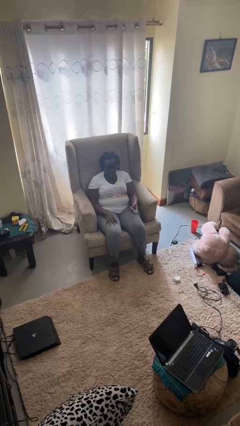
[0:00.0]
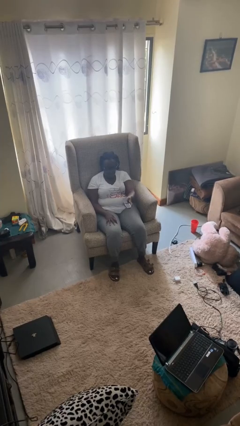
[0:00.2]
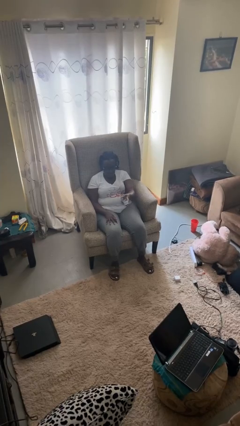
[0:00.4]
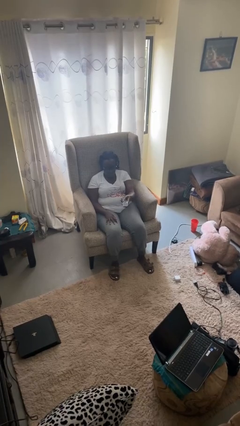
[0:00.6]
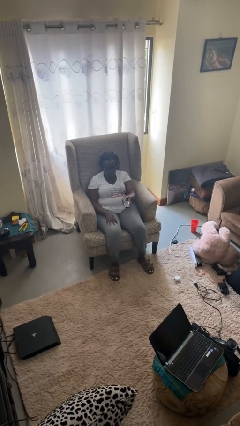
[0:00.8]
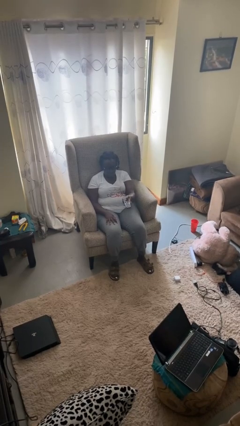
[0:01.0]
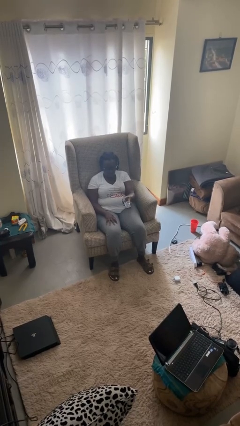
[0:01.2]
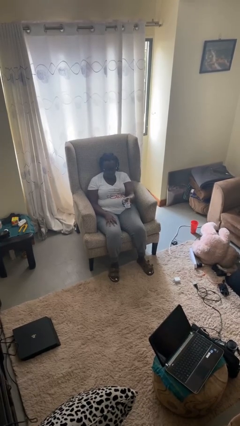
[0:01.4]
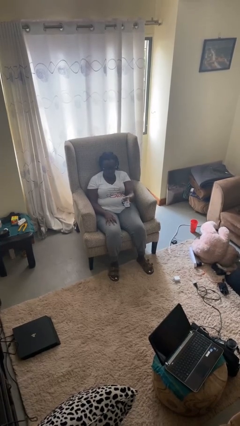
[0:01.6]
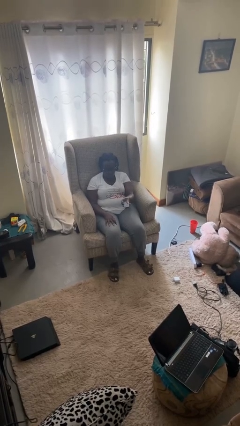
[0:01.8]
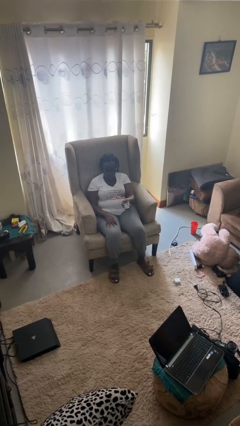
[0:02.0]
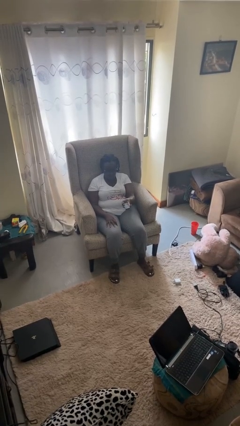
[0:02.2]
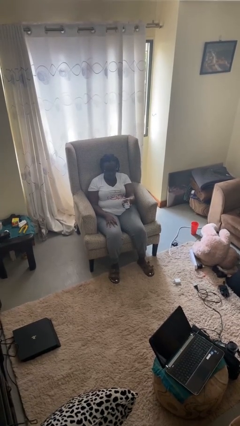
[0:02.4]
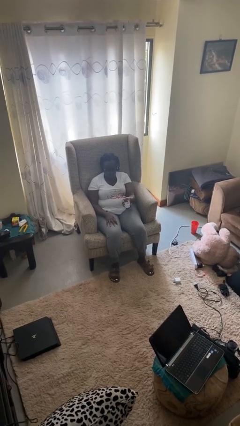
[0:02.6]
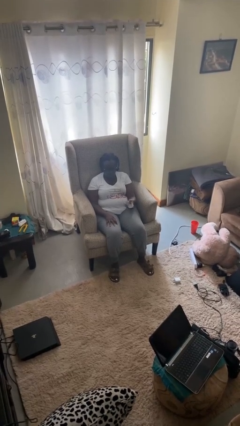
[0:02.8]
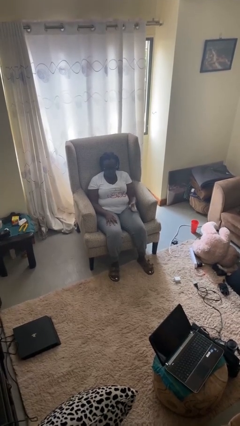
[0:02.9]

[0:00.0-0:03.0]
person uses television remote

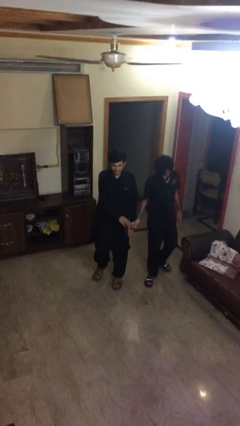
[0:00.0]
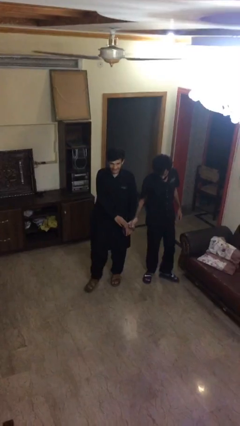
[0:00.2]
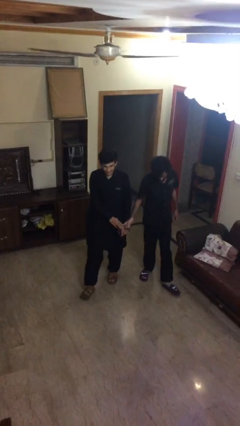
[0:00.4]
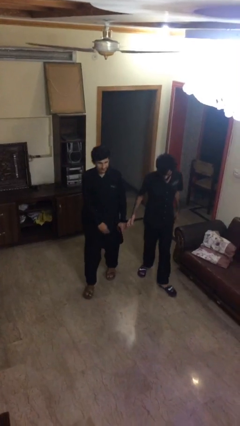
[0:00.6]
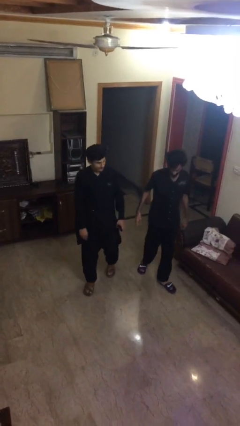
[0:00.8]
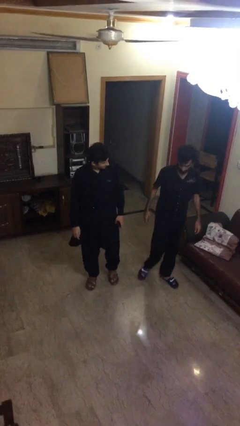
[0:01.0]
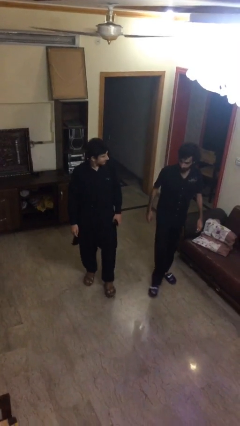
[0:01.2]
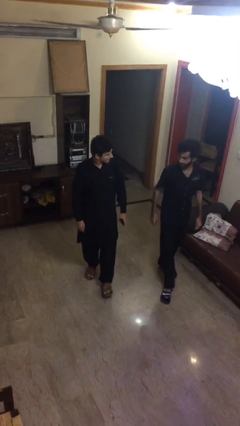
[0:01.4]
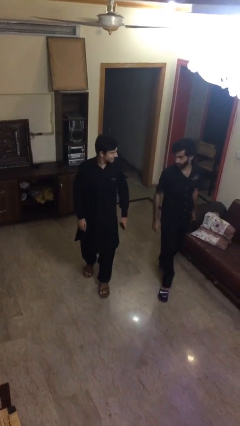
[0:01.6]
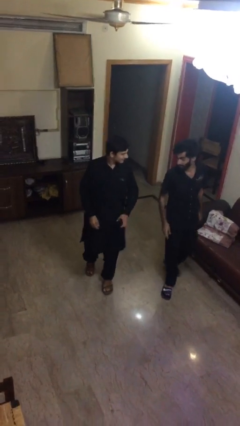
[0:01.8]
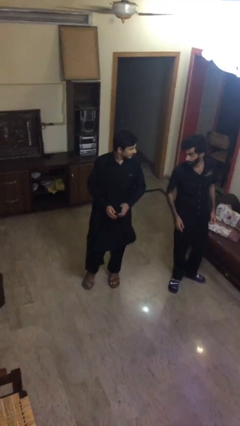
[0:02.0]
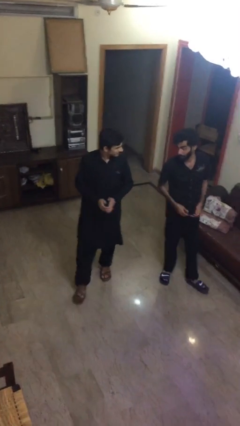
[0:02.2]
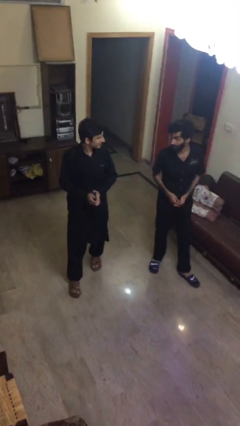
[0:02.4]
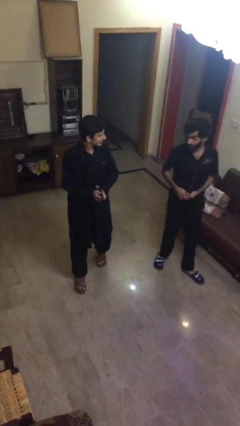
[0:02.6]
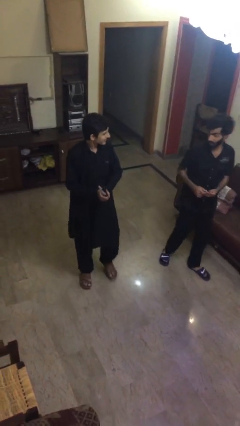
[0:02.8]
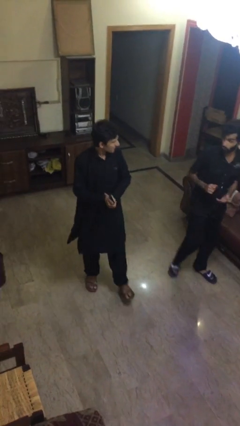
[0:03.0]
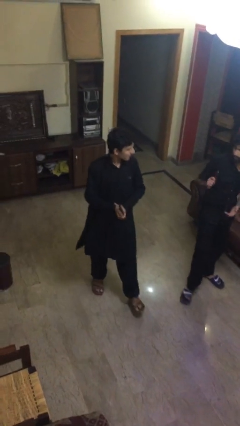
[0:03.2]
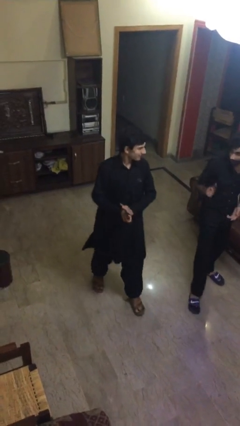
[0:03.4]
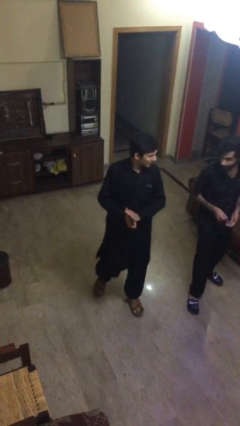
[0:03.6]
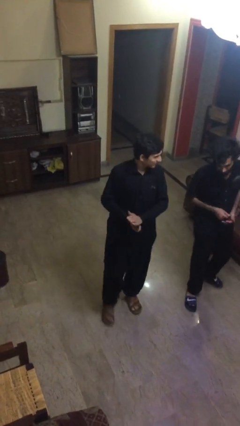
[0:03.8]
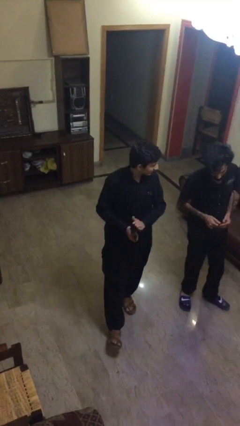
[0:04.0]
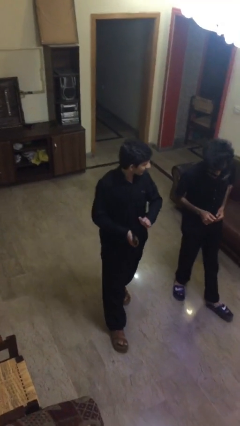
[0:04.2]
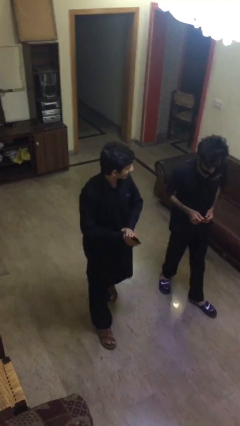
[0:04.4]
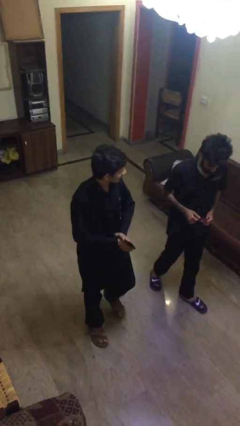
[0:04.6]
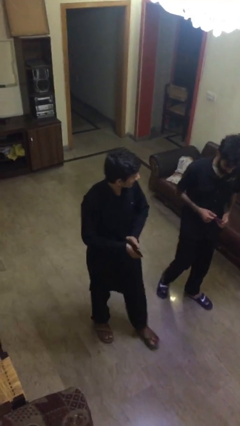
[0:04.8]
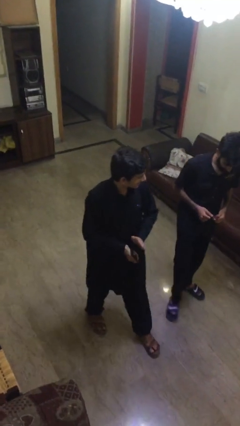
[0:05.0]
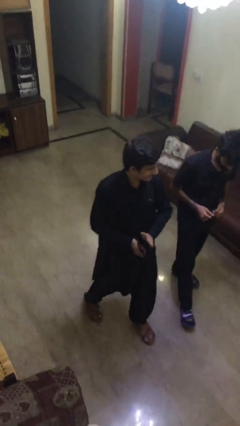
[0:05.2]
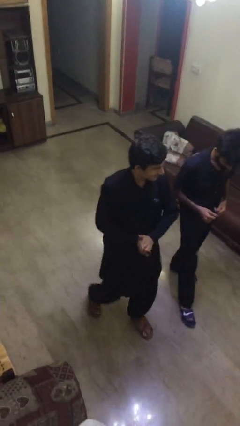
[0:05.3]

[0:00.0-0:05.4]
person talks to person

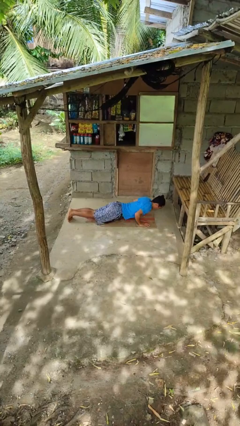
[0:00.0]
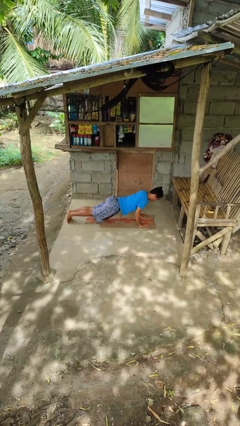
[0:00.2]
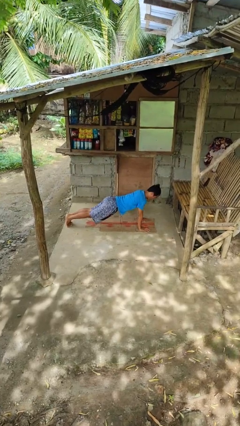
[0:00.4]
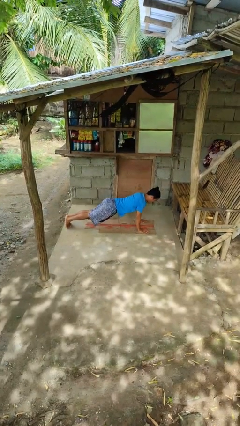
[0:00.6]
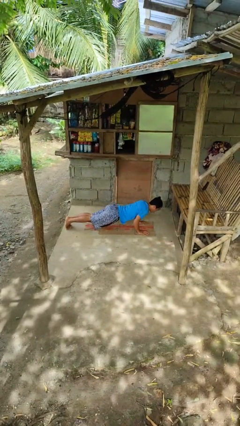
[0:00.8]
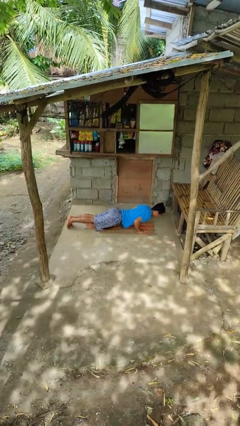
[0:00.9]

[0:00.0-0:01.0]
person exercises with pushup

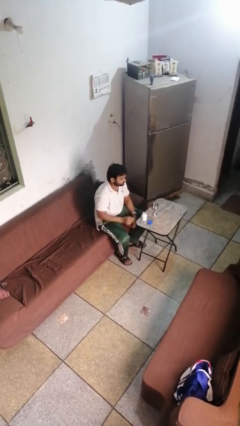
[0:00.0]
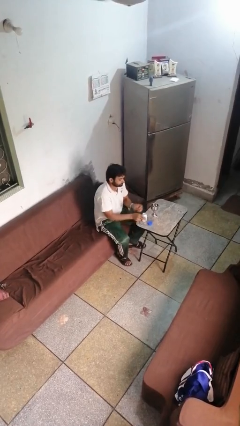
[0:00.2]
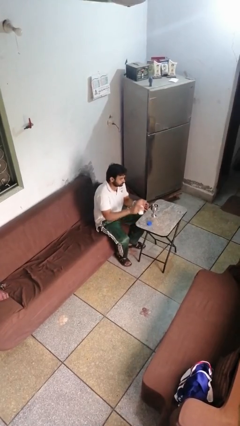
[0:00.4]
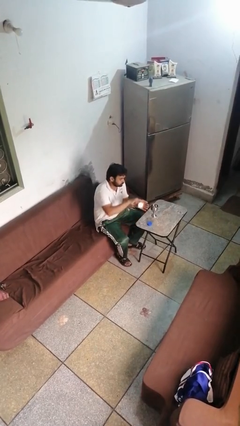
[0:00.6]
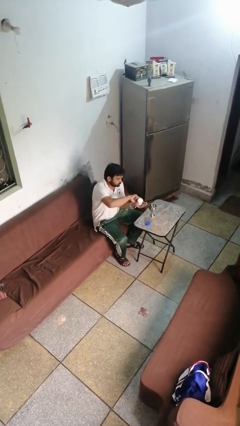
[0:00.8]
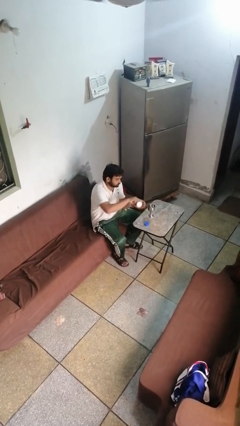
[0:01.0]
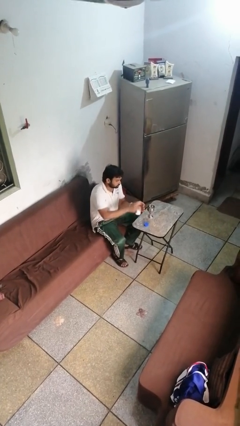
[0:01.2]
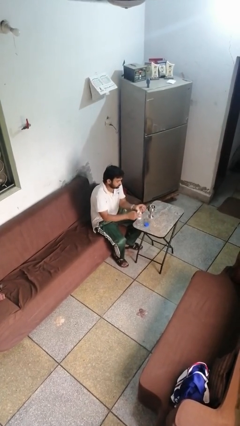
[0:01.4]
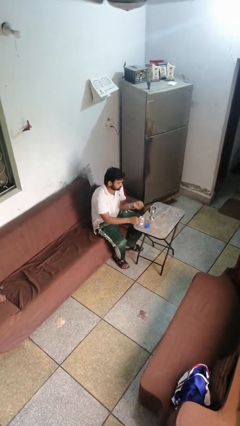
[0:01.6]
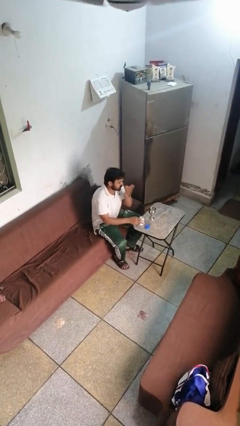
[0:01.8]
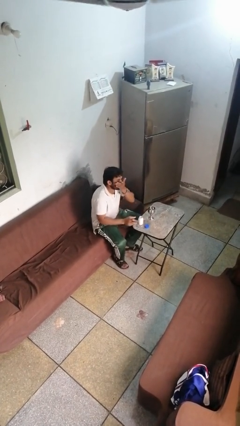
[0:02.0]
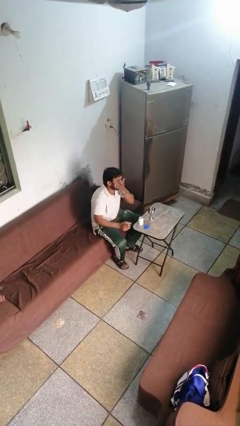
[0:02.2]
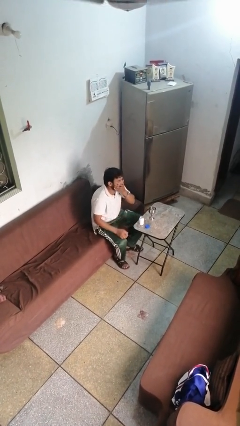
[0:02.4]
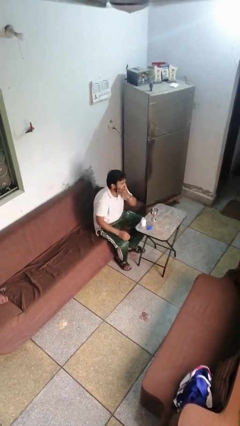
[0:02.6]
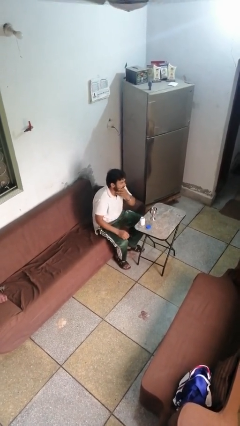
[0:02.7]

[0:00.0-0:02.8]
person takes medicine pills

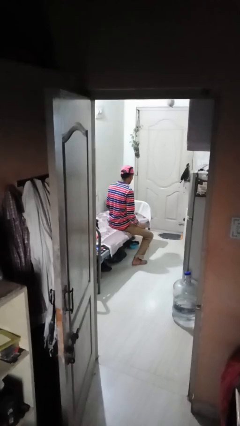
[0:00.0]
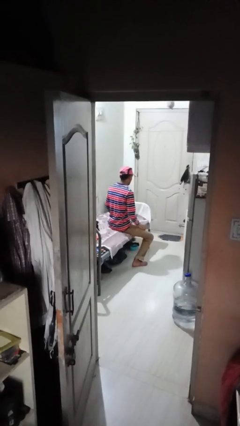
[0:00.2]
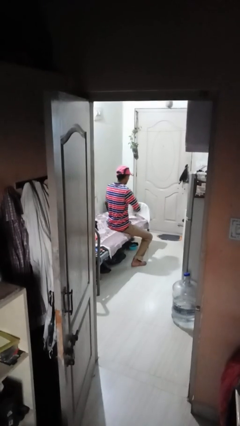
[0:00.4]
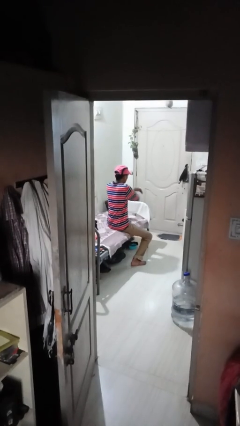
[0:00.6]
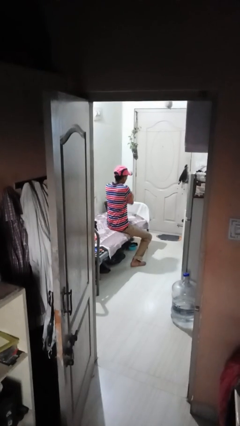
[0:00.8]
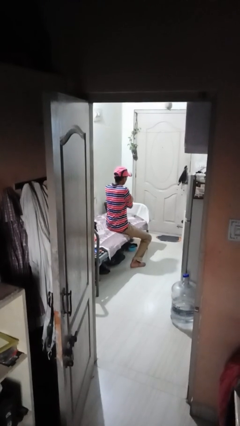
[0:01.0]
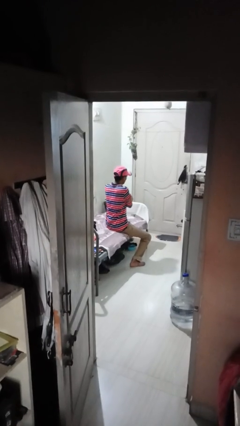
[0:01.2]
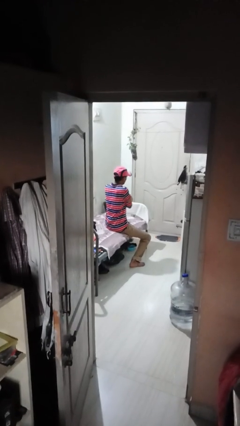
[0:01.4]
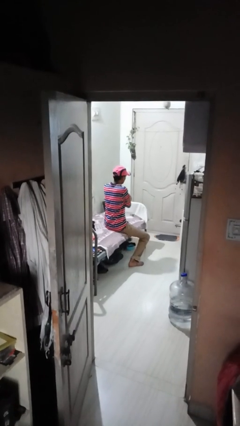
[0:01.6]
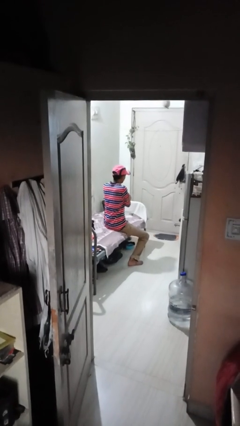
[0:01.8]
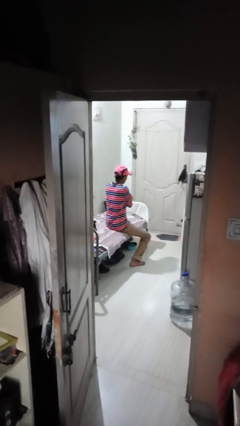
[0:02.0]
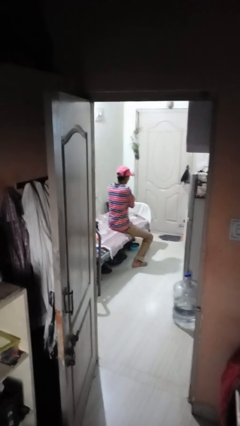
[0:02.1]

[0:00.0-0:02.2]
person crosses arms

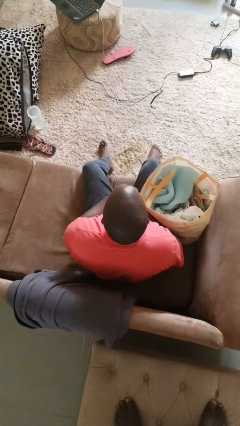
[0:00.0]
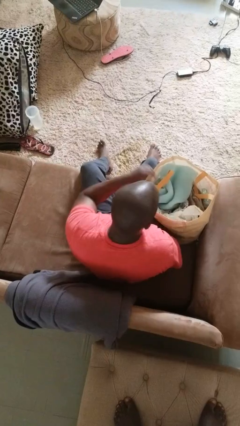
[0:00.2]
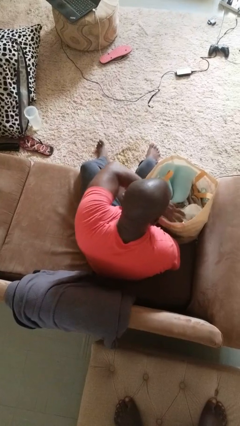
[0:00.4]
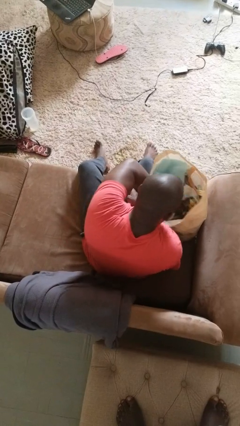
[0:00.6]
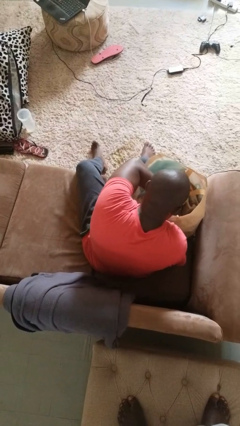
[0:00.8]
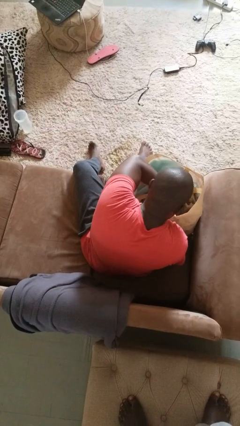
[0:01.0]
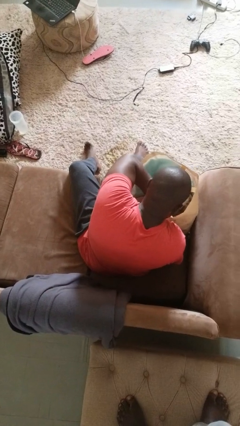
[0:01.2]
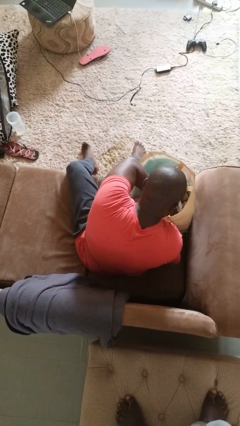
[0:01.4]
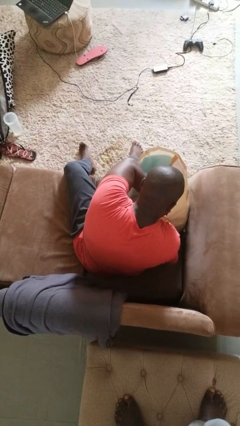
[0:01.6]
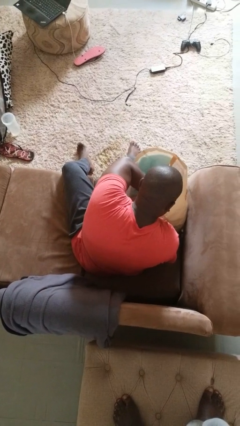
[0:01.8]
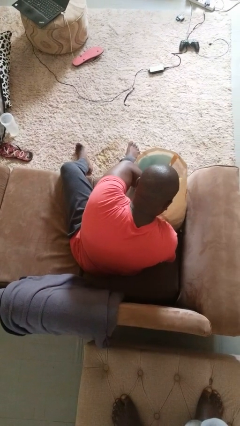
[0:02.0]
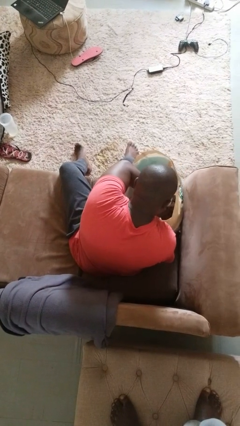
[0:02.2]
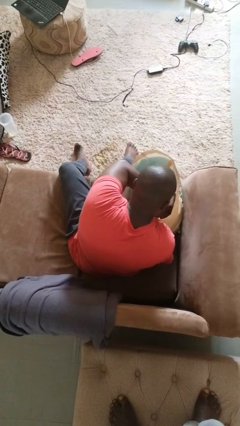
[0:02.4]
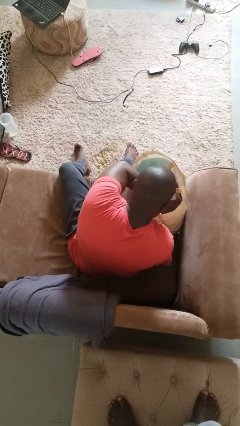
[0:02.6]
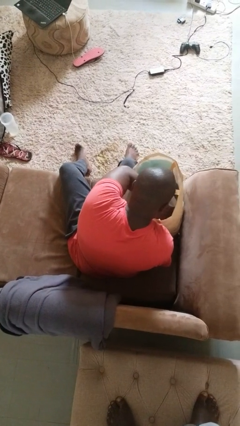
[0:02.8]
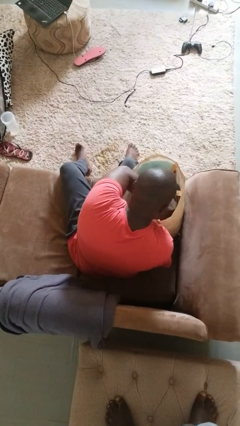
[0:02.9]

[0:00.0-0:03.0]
person searches in bag

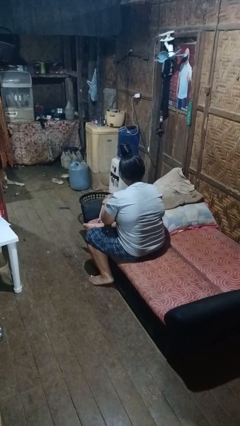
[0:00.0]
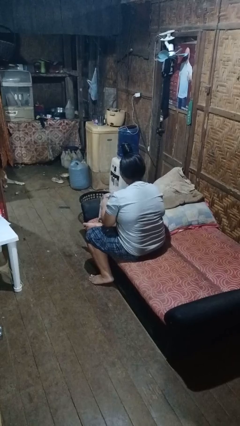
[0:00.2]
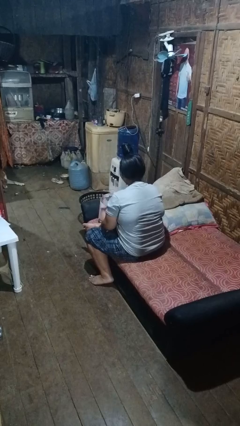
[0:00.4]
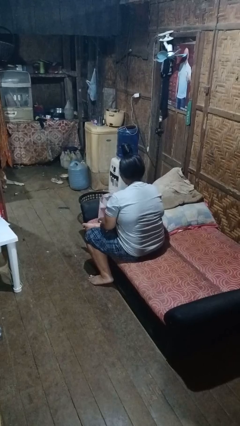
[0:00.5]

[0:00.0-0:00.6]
person puts object into bag
